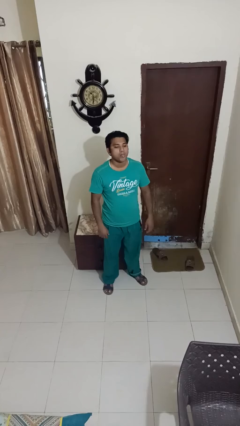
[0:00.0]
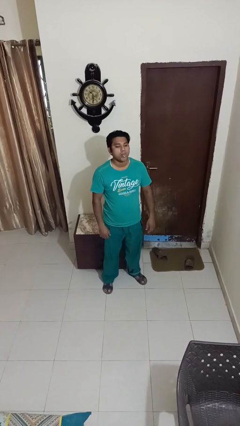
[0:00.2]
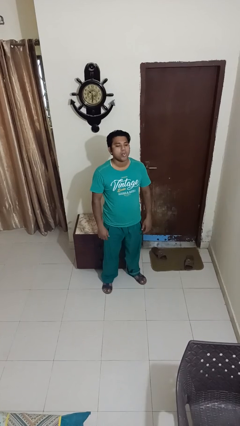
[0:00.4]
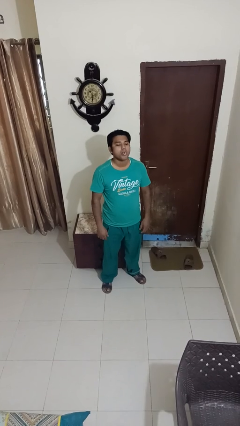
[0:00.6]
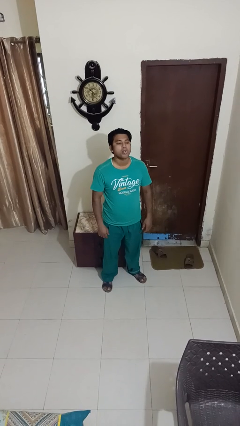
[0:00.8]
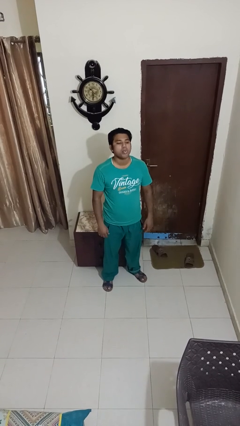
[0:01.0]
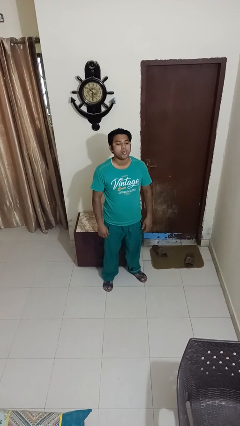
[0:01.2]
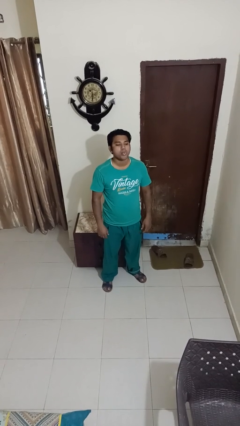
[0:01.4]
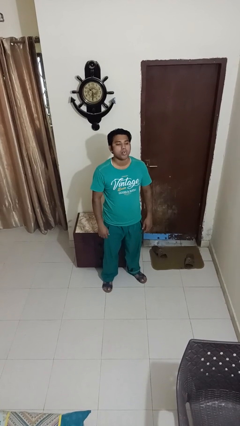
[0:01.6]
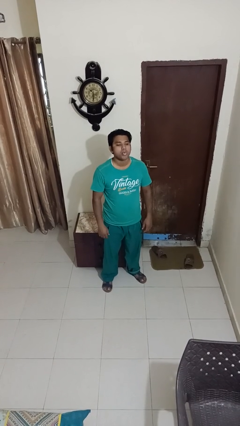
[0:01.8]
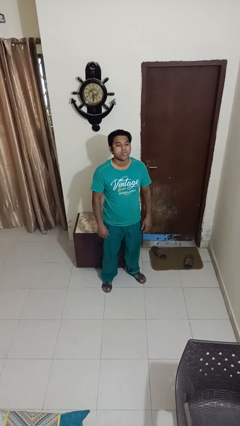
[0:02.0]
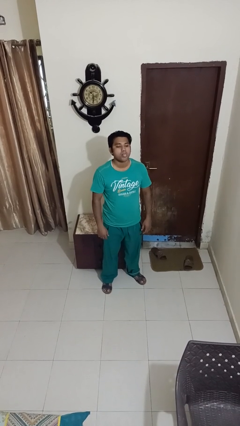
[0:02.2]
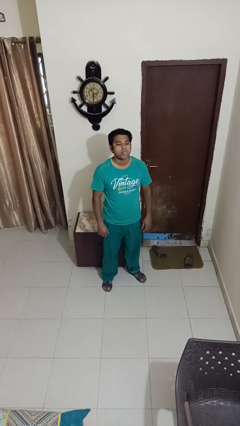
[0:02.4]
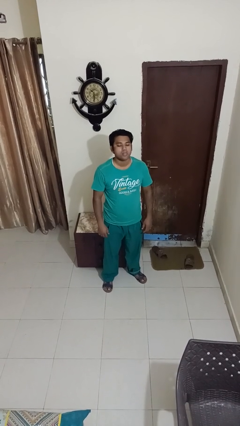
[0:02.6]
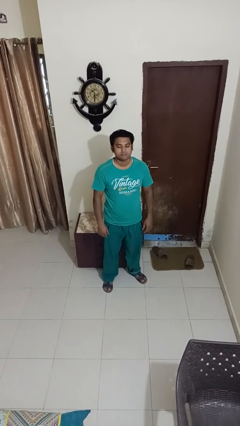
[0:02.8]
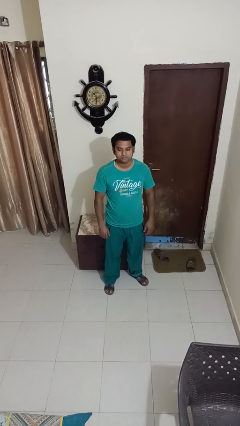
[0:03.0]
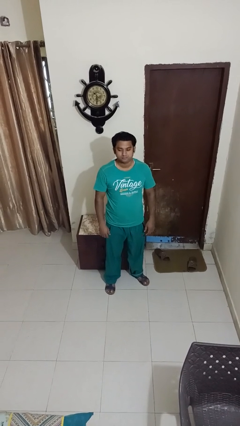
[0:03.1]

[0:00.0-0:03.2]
person sticks out tongue

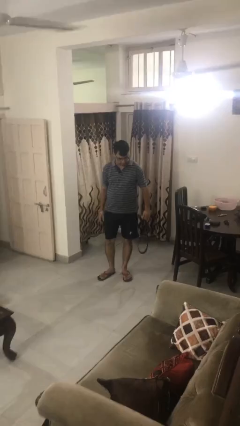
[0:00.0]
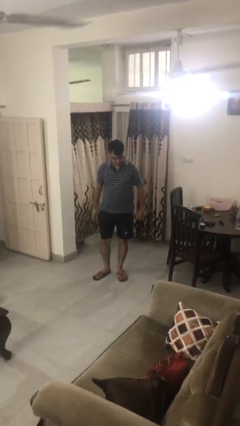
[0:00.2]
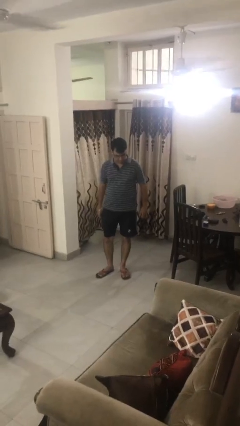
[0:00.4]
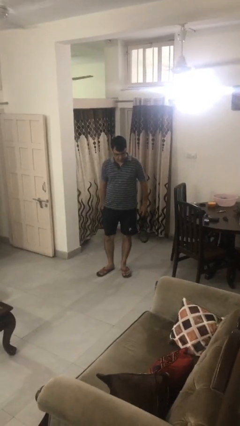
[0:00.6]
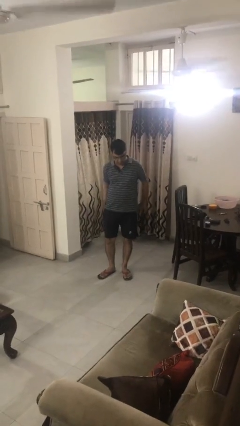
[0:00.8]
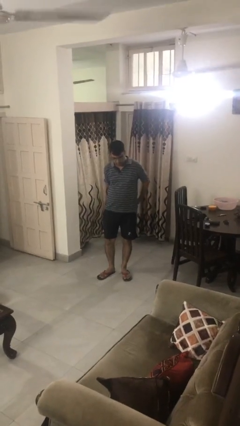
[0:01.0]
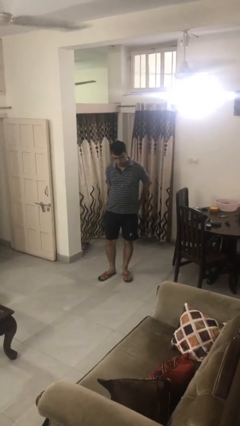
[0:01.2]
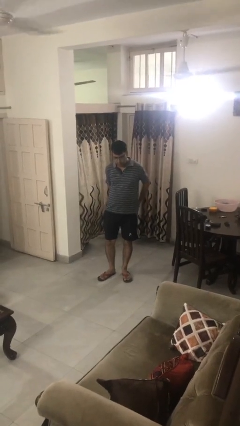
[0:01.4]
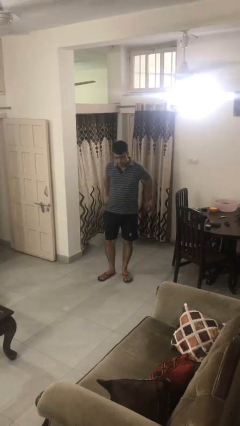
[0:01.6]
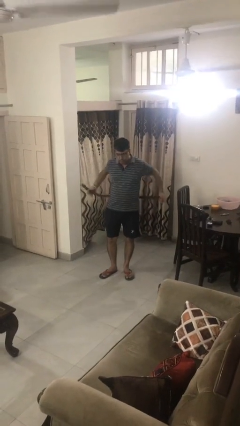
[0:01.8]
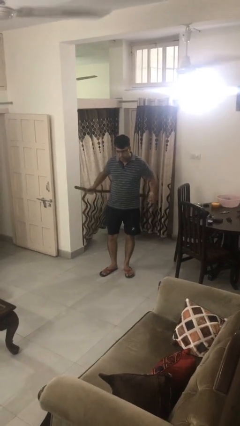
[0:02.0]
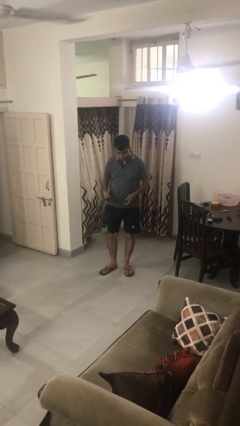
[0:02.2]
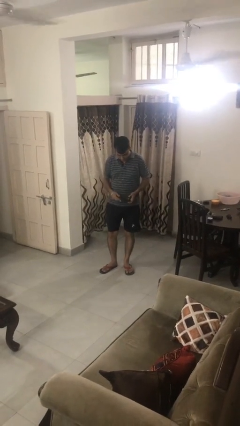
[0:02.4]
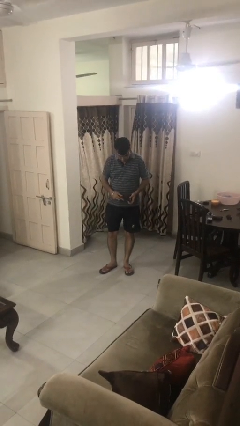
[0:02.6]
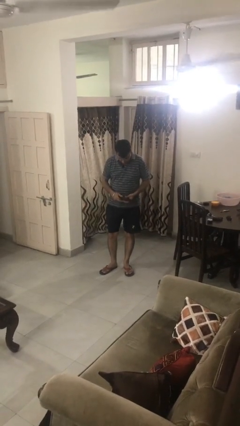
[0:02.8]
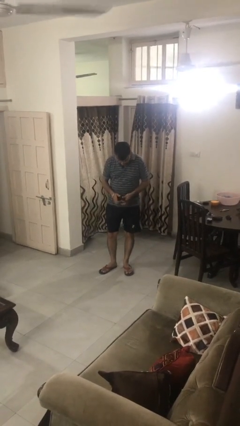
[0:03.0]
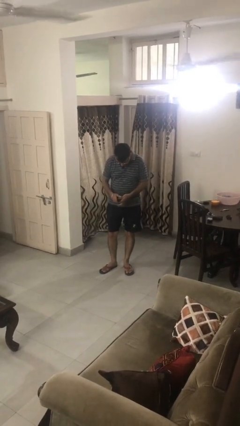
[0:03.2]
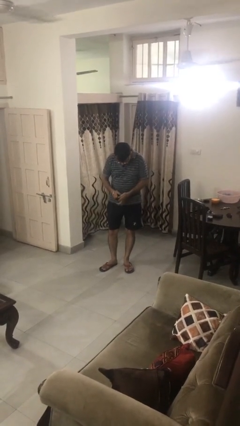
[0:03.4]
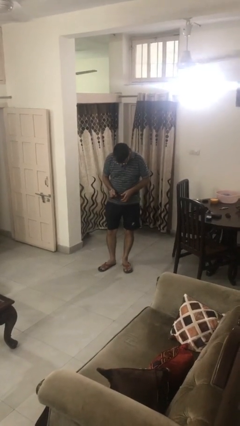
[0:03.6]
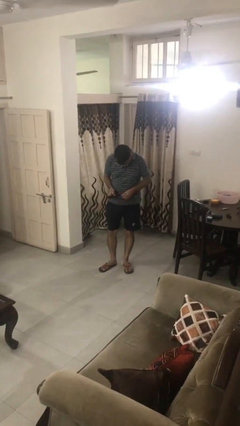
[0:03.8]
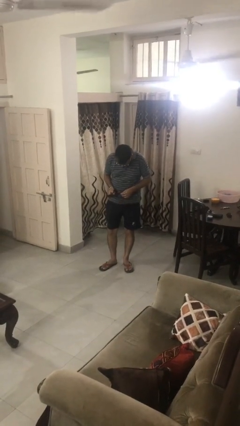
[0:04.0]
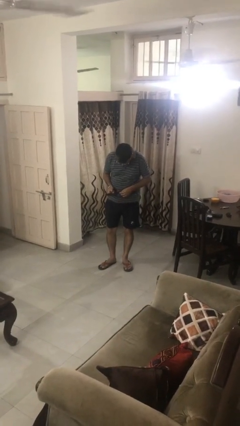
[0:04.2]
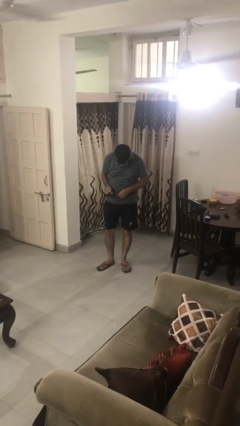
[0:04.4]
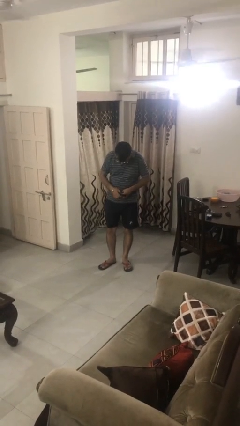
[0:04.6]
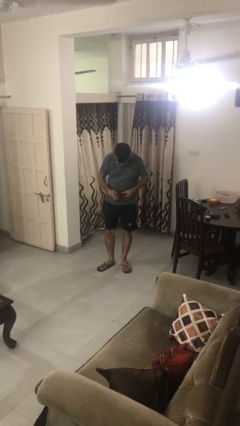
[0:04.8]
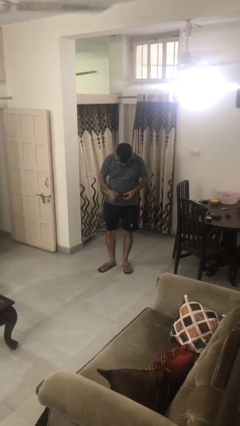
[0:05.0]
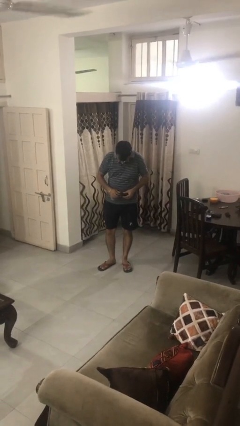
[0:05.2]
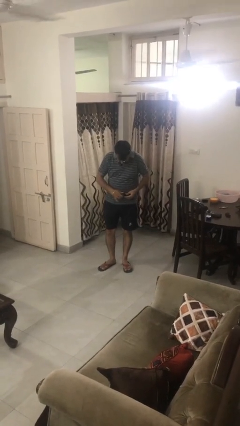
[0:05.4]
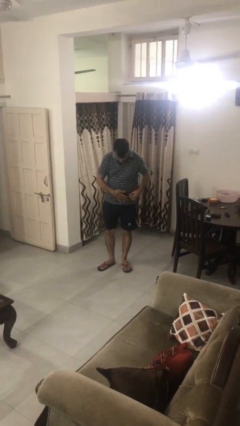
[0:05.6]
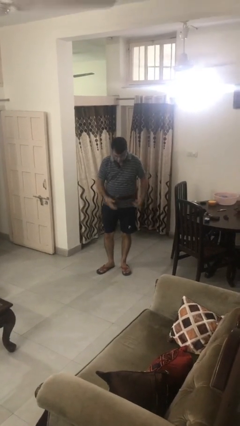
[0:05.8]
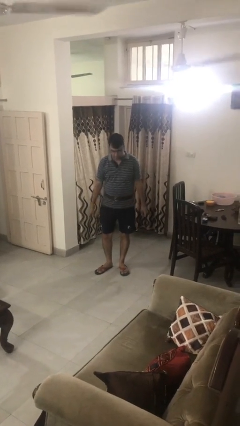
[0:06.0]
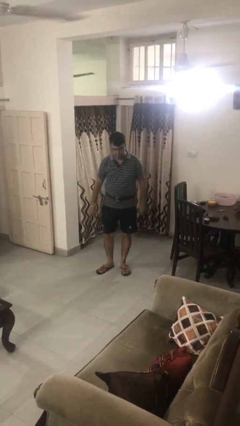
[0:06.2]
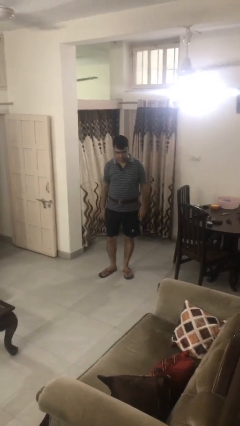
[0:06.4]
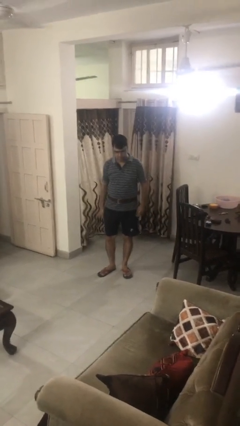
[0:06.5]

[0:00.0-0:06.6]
person puts on belt

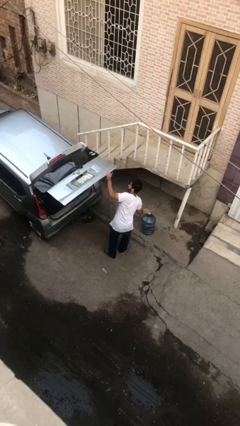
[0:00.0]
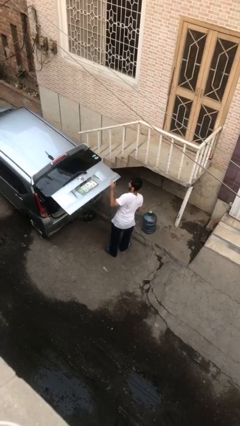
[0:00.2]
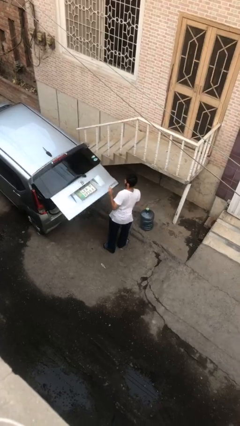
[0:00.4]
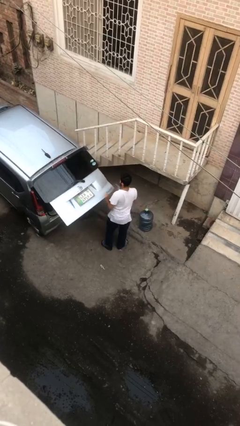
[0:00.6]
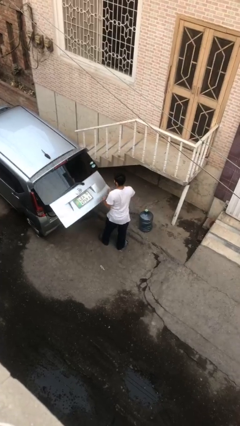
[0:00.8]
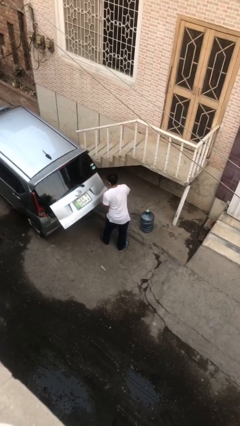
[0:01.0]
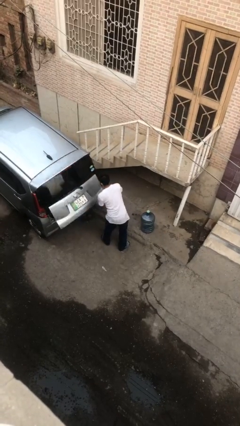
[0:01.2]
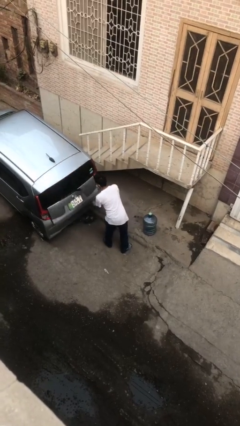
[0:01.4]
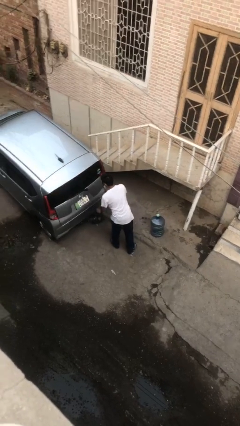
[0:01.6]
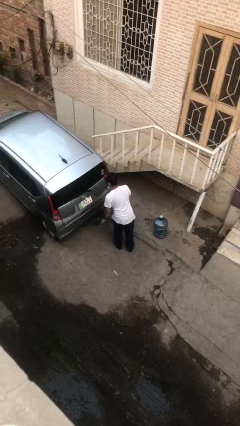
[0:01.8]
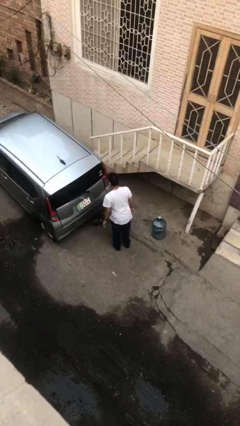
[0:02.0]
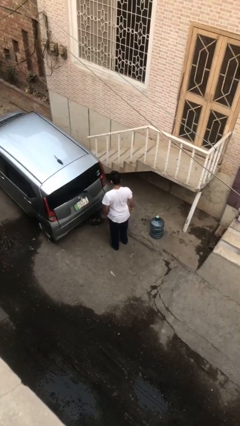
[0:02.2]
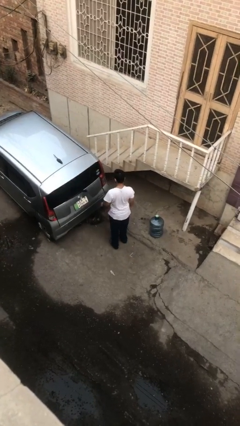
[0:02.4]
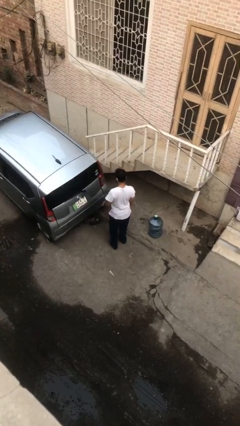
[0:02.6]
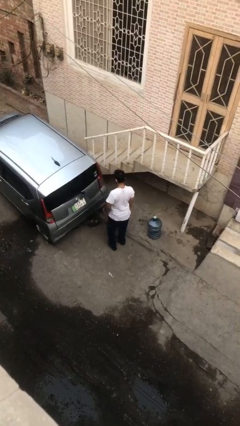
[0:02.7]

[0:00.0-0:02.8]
person closes car trunk

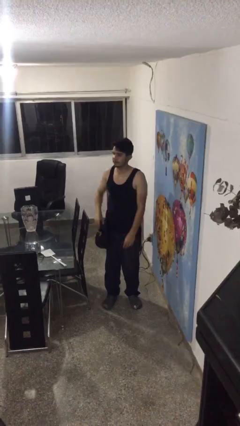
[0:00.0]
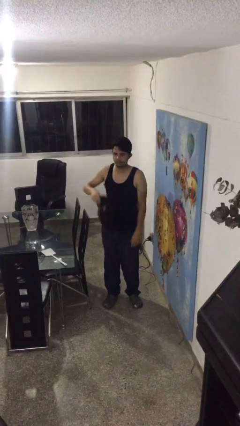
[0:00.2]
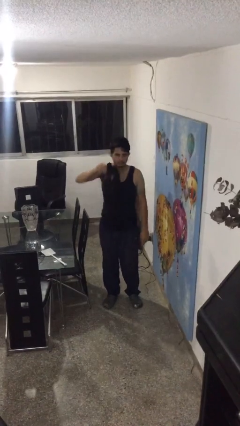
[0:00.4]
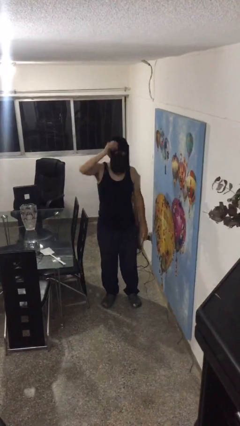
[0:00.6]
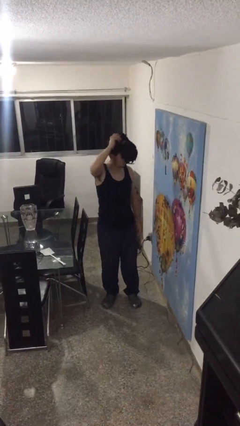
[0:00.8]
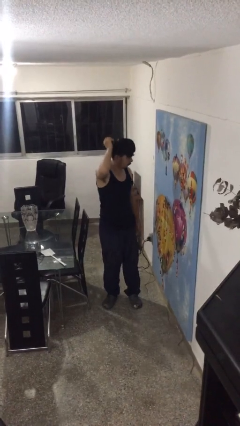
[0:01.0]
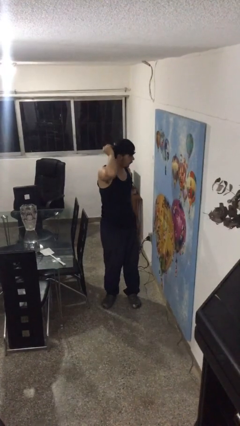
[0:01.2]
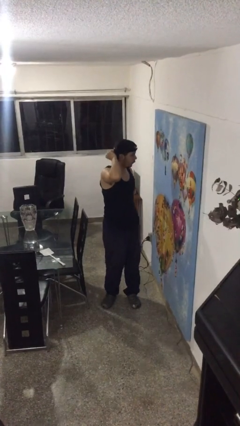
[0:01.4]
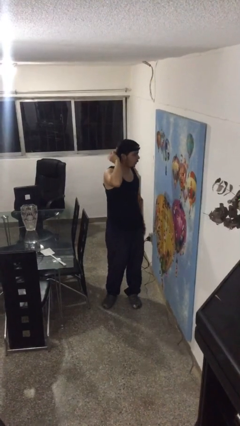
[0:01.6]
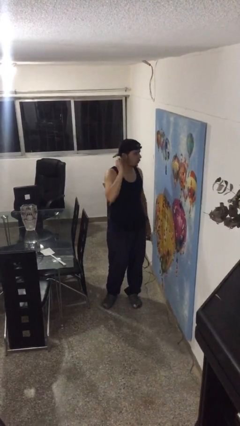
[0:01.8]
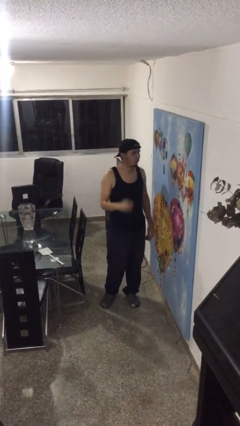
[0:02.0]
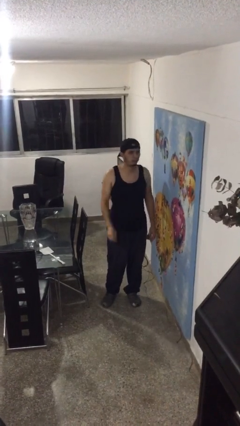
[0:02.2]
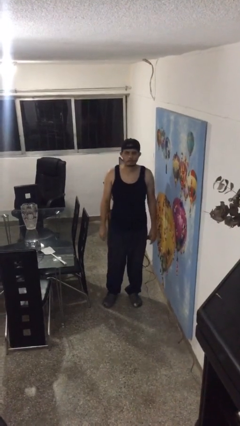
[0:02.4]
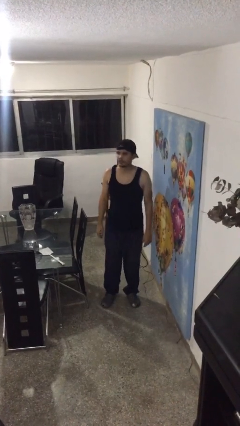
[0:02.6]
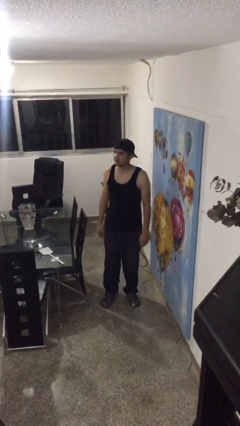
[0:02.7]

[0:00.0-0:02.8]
person puts on hat

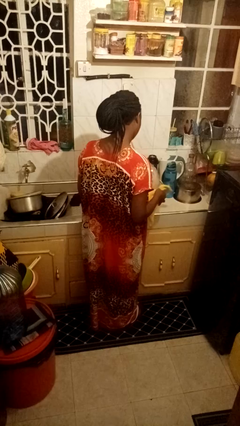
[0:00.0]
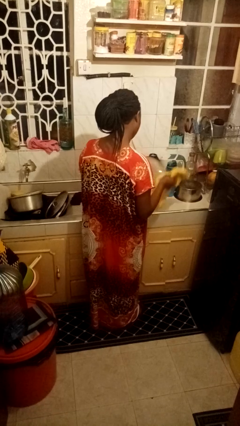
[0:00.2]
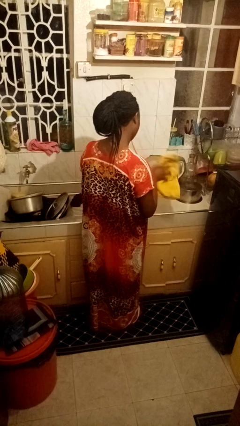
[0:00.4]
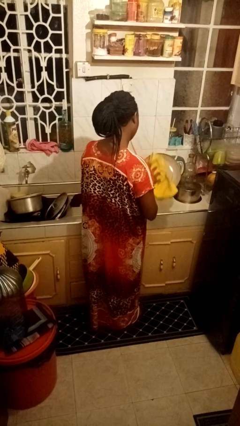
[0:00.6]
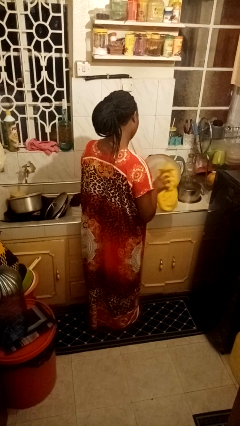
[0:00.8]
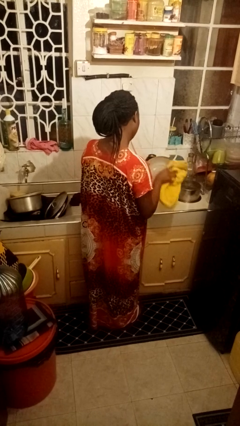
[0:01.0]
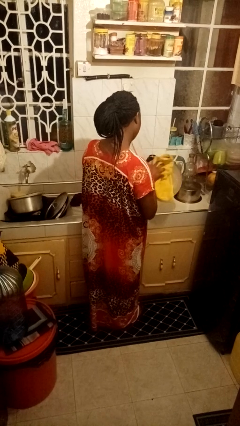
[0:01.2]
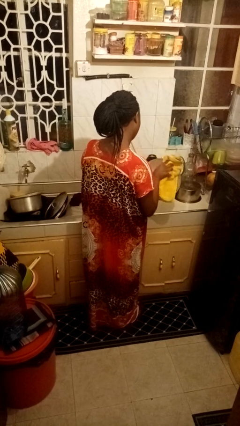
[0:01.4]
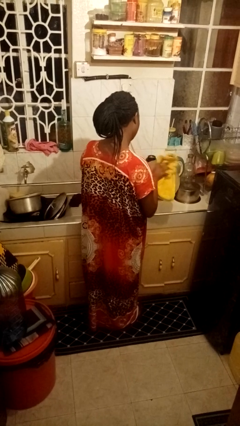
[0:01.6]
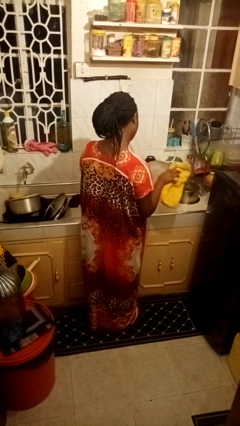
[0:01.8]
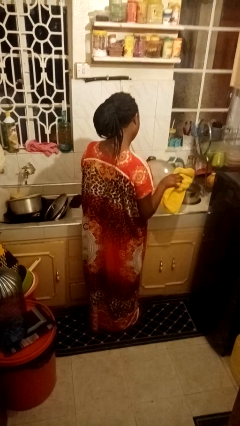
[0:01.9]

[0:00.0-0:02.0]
person dries dish

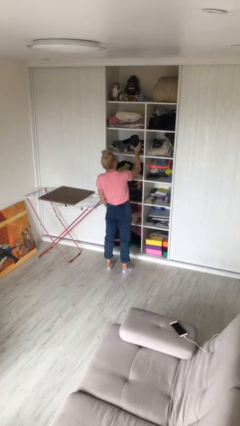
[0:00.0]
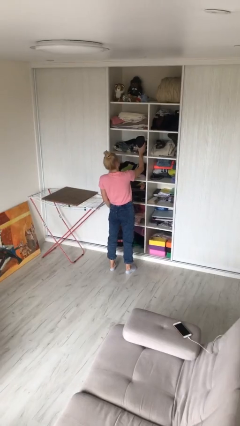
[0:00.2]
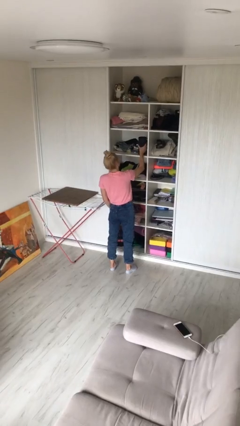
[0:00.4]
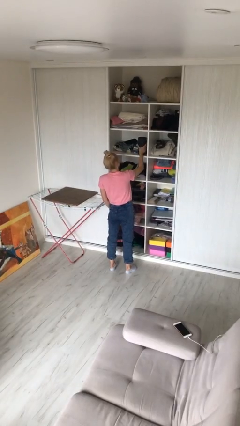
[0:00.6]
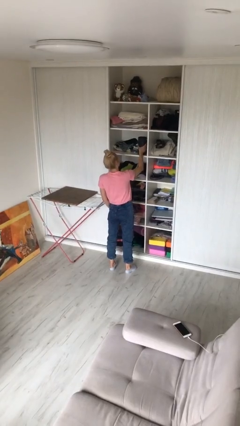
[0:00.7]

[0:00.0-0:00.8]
person puts down object on shelf
